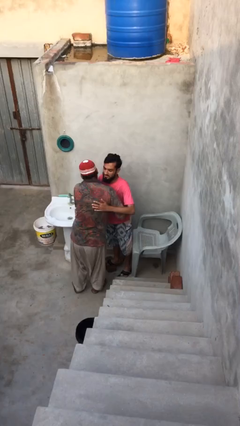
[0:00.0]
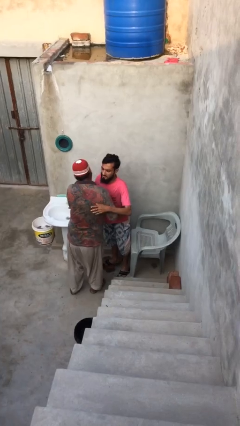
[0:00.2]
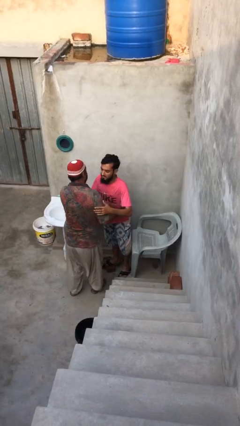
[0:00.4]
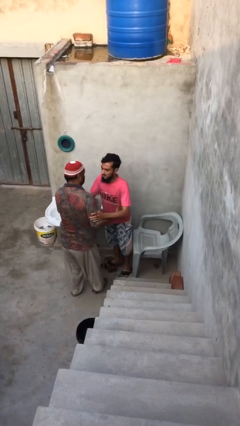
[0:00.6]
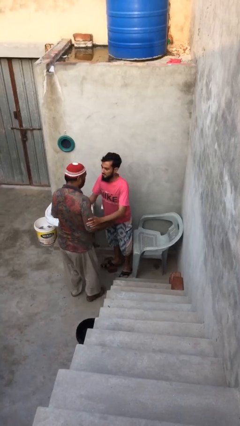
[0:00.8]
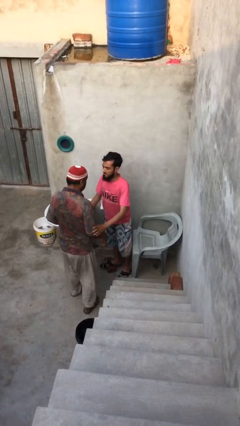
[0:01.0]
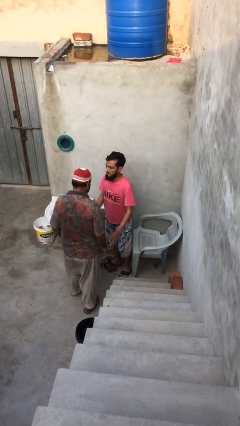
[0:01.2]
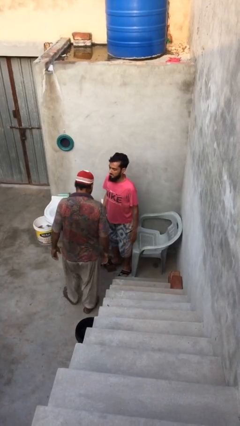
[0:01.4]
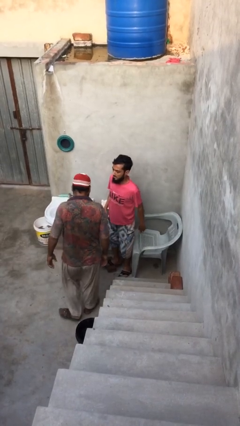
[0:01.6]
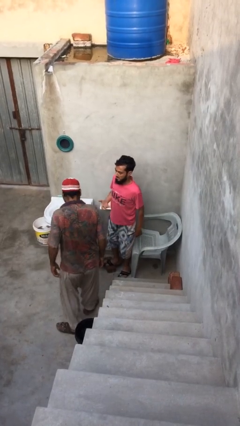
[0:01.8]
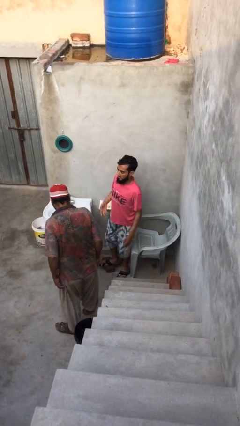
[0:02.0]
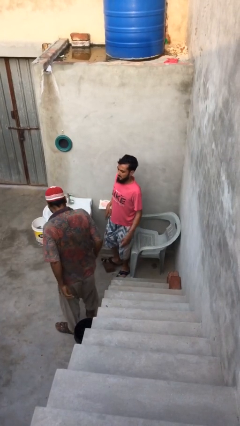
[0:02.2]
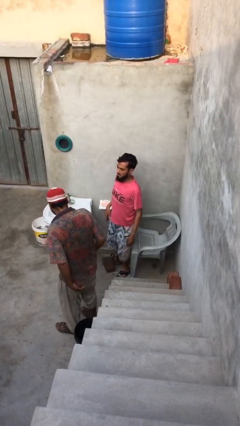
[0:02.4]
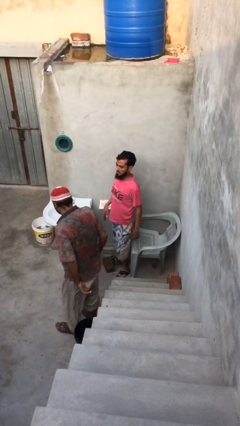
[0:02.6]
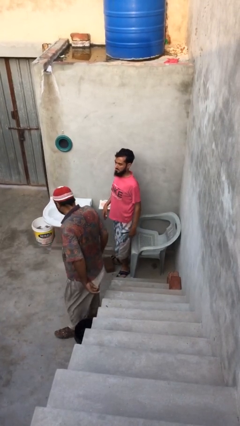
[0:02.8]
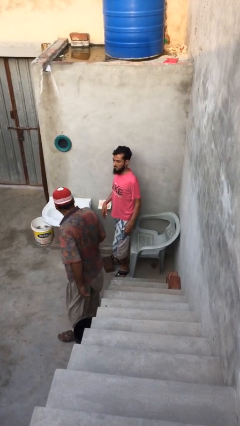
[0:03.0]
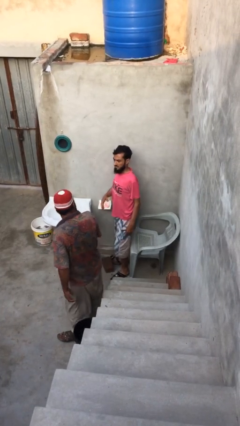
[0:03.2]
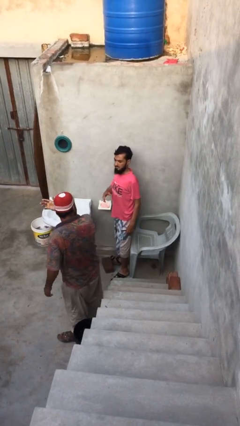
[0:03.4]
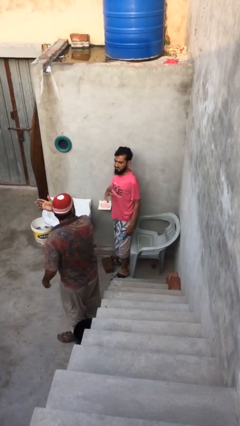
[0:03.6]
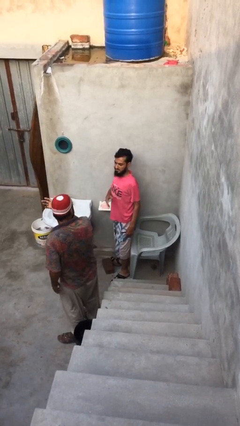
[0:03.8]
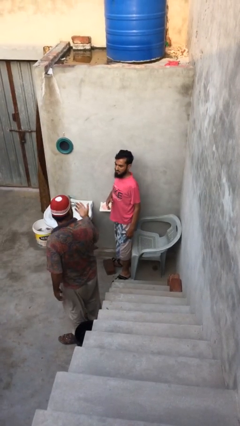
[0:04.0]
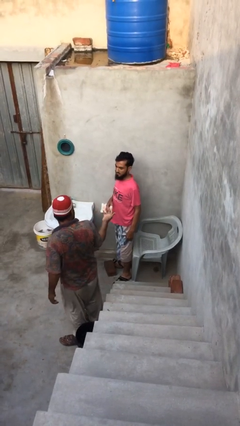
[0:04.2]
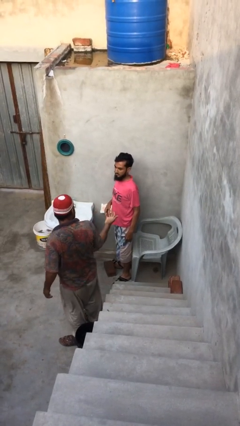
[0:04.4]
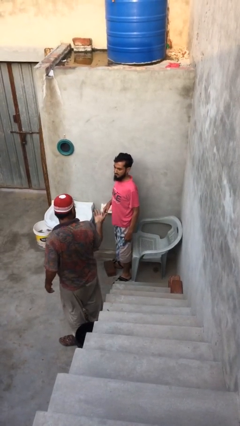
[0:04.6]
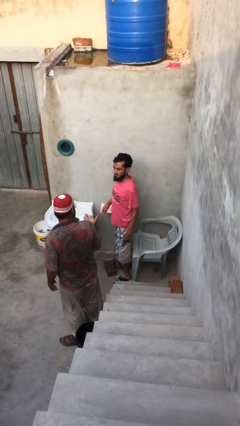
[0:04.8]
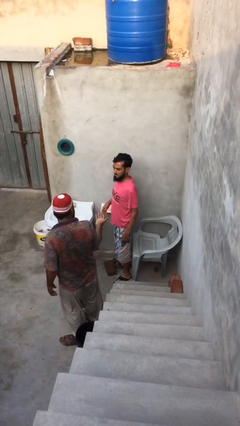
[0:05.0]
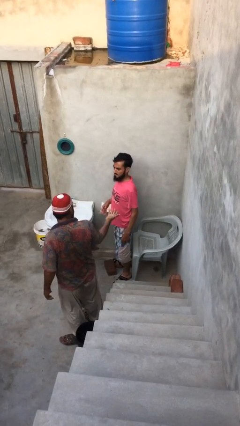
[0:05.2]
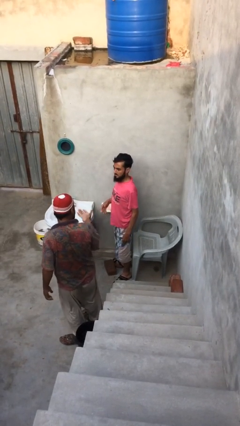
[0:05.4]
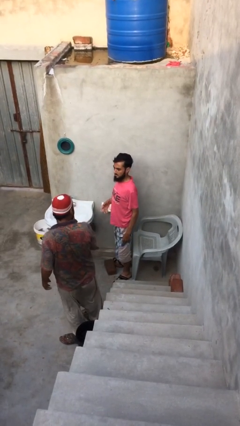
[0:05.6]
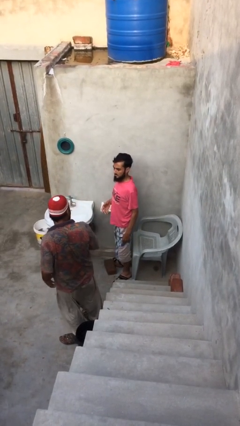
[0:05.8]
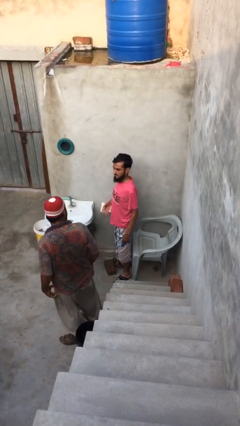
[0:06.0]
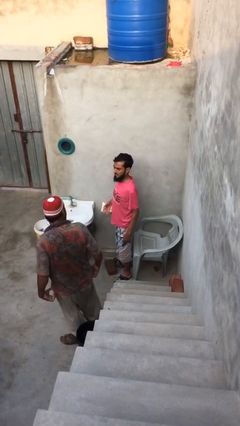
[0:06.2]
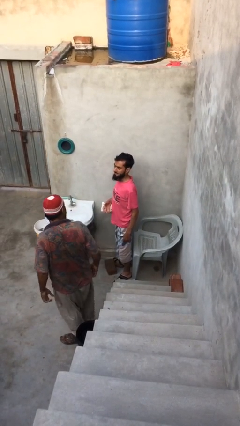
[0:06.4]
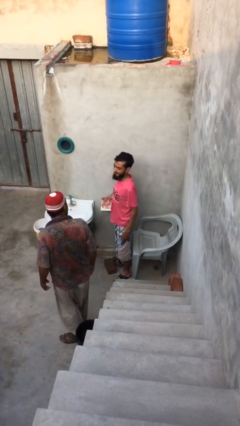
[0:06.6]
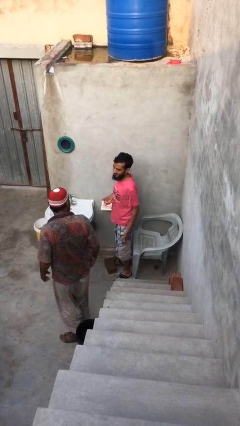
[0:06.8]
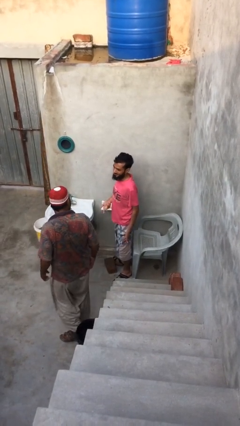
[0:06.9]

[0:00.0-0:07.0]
person talks to person

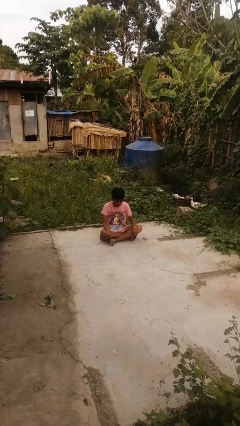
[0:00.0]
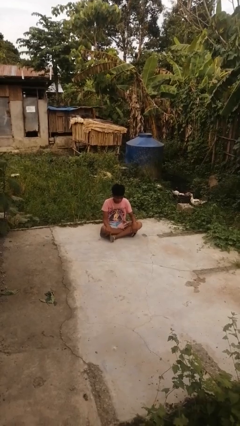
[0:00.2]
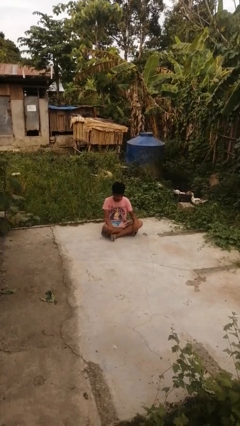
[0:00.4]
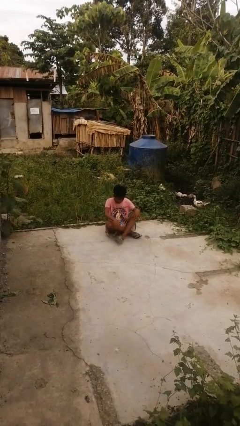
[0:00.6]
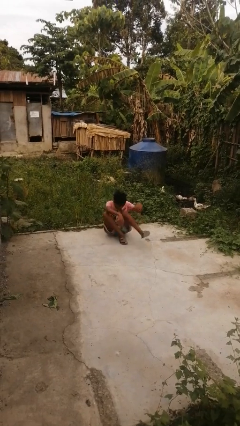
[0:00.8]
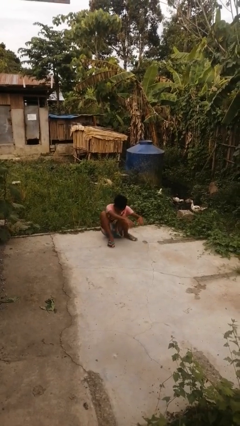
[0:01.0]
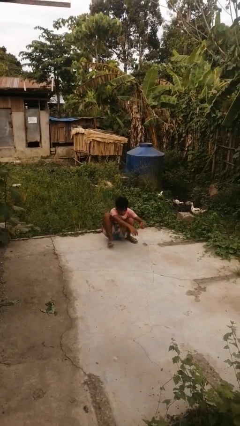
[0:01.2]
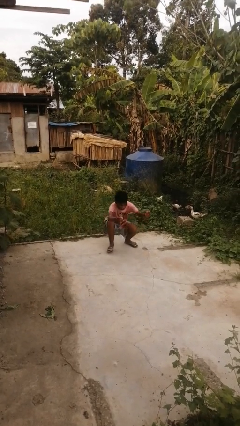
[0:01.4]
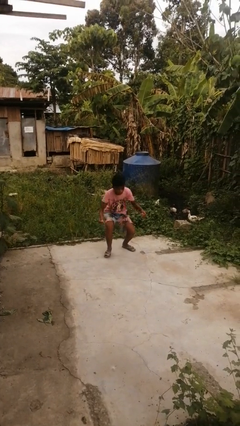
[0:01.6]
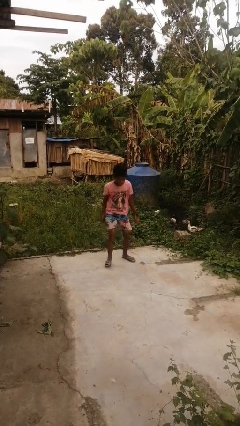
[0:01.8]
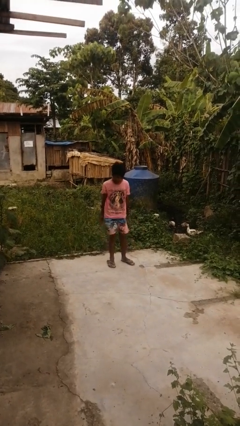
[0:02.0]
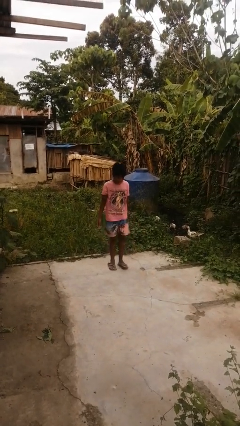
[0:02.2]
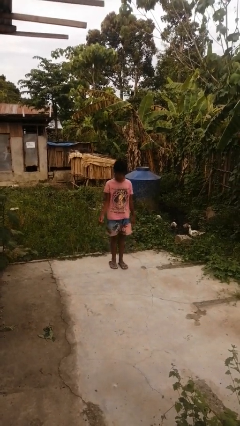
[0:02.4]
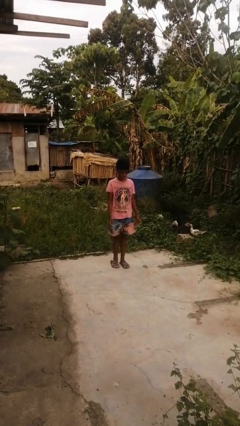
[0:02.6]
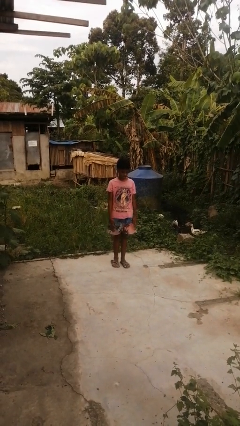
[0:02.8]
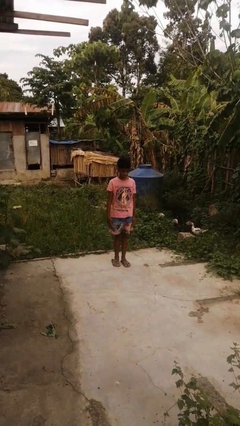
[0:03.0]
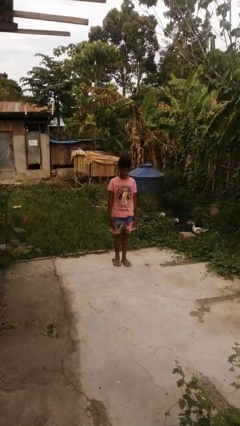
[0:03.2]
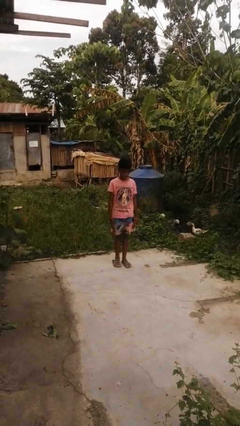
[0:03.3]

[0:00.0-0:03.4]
person stands up from floor

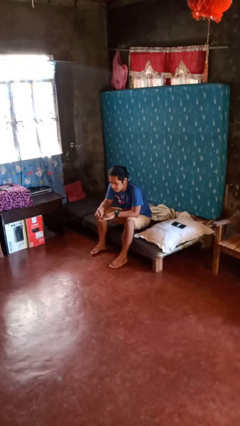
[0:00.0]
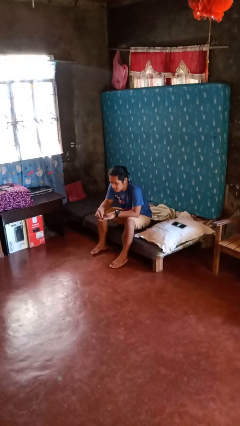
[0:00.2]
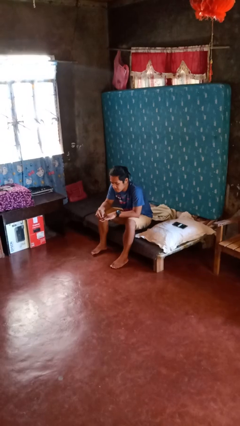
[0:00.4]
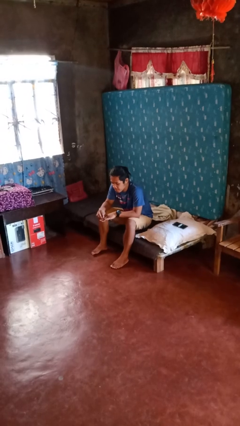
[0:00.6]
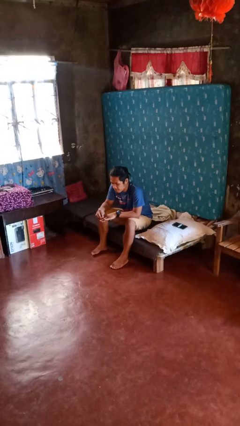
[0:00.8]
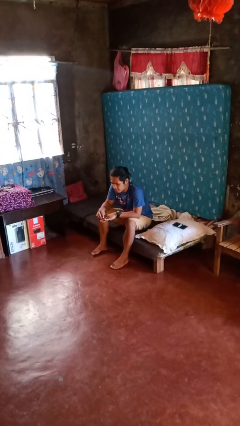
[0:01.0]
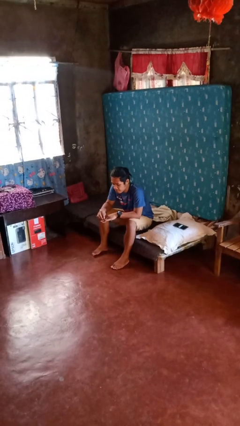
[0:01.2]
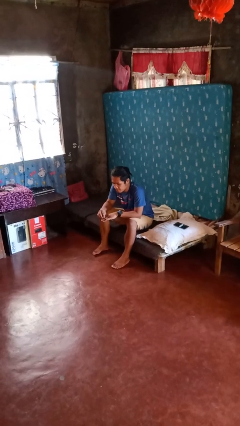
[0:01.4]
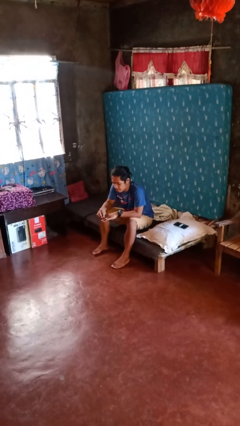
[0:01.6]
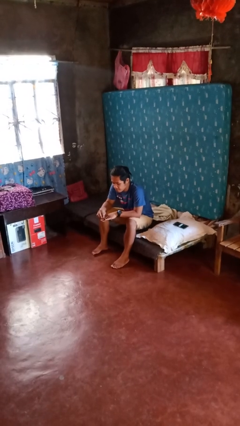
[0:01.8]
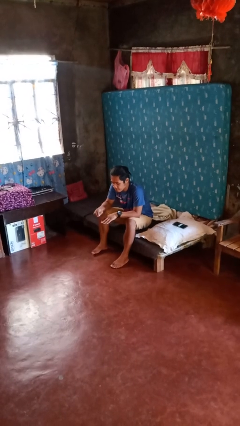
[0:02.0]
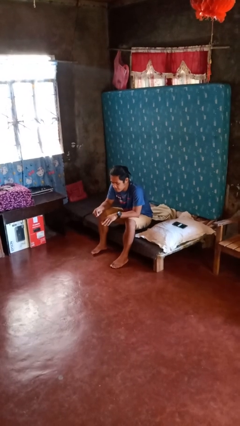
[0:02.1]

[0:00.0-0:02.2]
person files fingernails

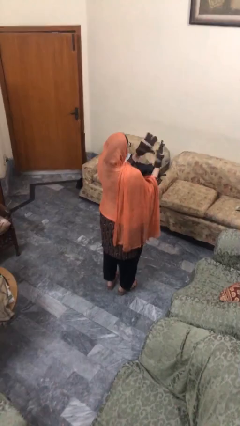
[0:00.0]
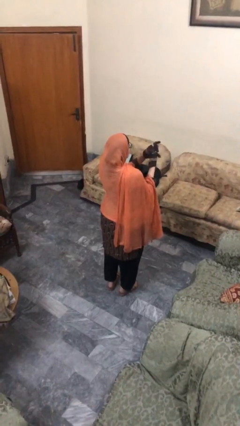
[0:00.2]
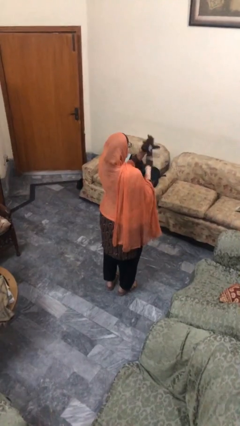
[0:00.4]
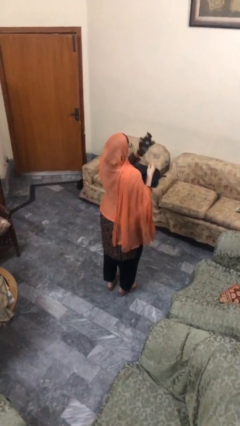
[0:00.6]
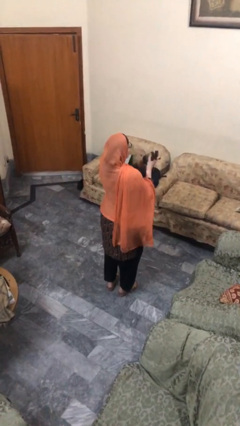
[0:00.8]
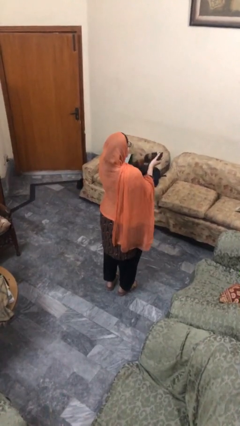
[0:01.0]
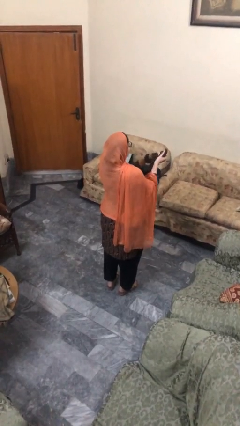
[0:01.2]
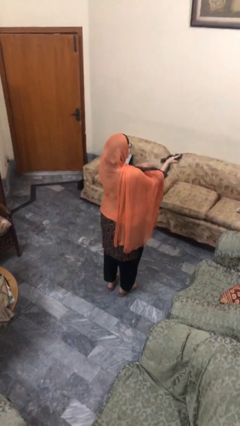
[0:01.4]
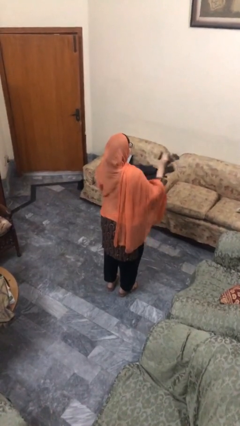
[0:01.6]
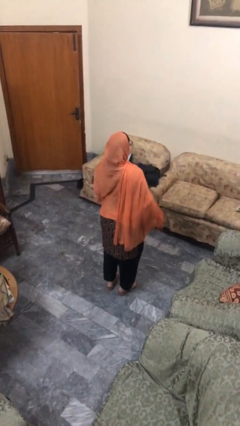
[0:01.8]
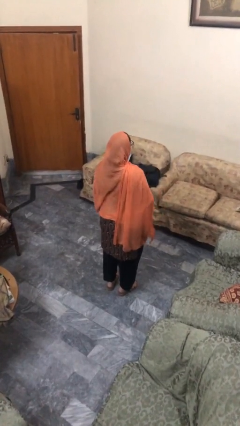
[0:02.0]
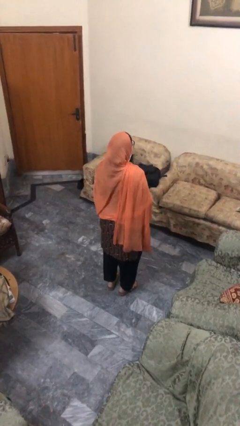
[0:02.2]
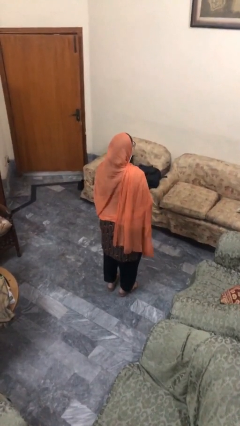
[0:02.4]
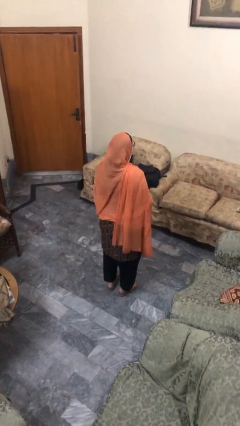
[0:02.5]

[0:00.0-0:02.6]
person takes off gloves

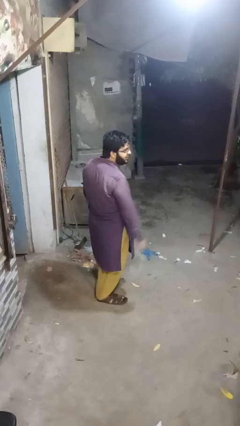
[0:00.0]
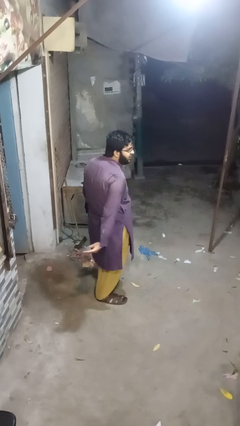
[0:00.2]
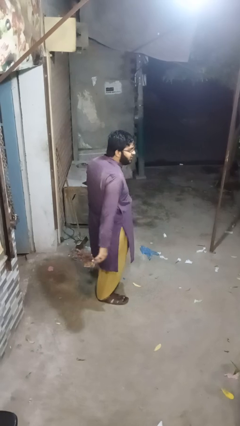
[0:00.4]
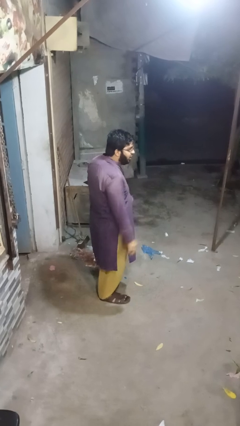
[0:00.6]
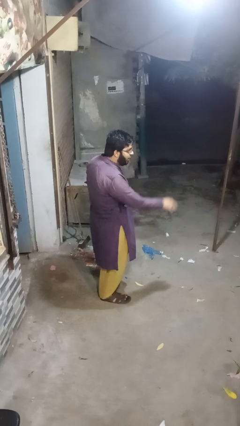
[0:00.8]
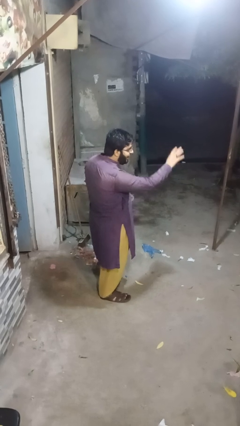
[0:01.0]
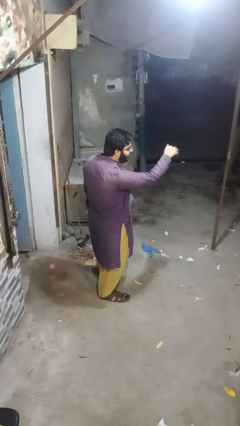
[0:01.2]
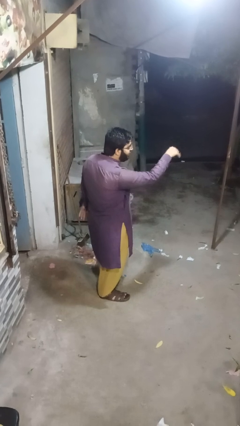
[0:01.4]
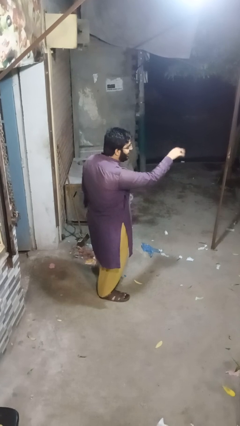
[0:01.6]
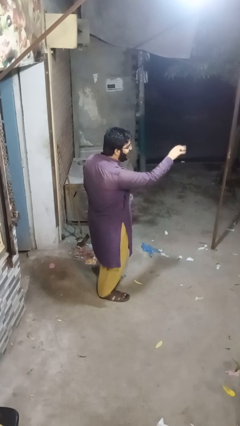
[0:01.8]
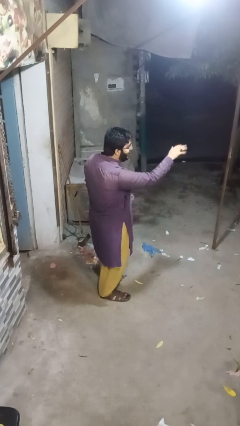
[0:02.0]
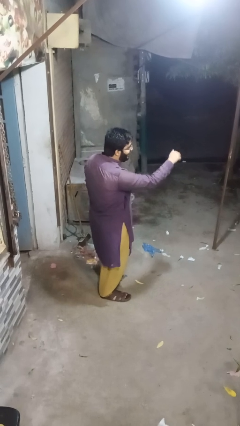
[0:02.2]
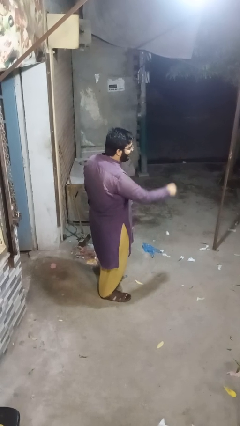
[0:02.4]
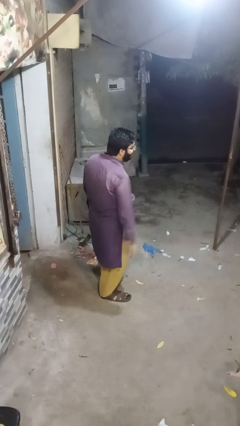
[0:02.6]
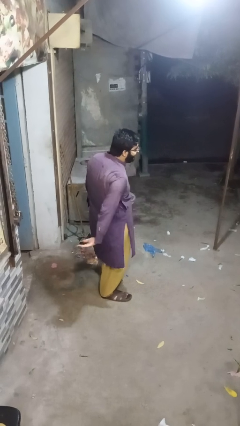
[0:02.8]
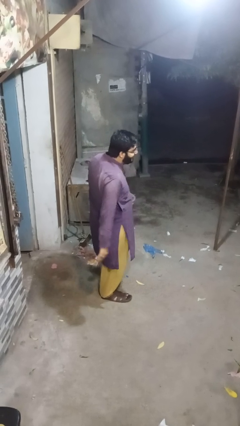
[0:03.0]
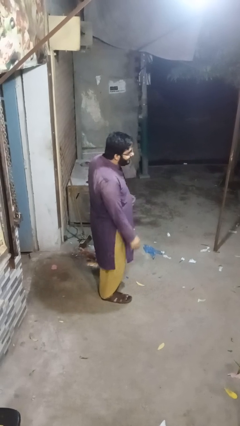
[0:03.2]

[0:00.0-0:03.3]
person gestures come here
